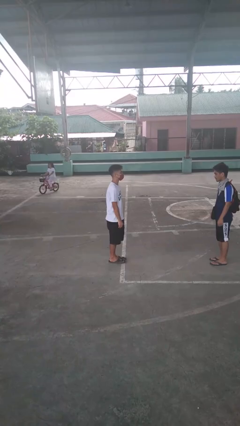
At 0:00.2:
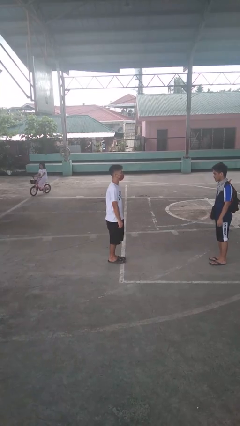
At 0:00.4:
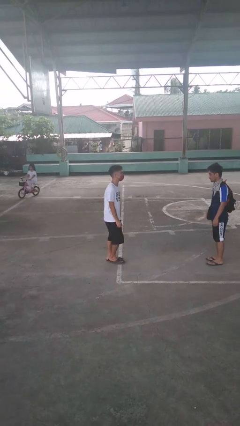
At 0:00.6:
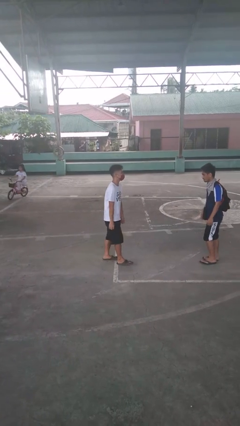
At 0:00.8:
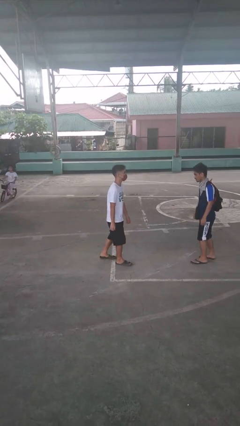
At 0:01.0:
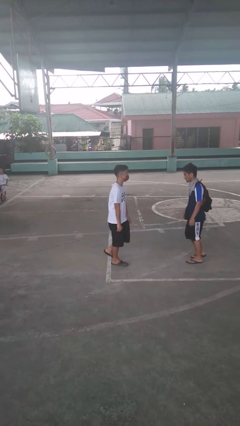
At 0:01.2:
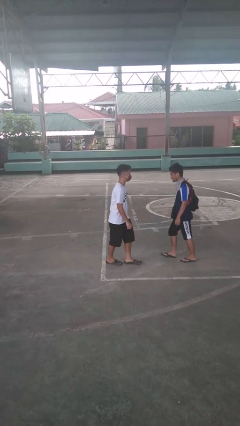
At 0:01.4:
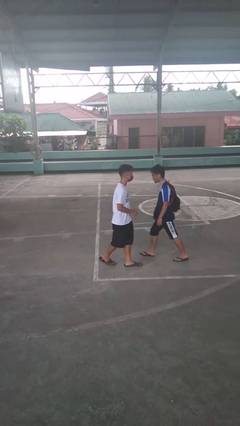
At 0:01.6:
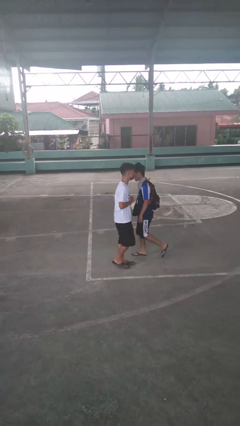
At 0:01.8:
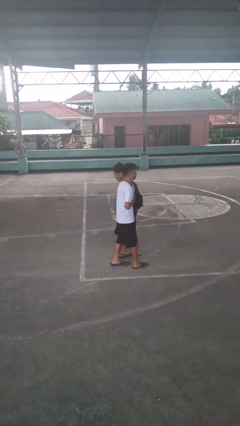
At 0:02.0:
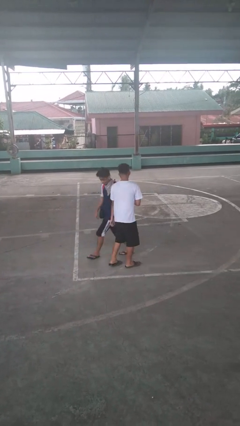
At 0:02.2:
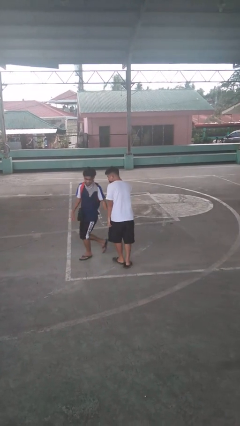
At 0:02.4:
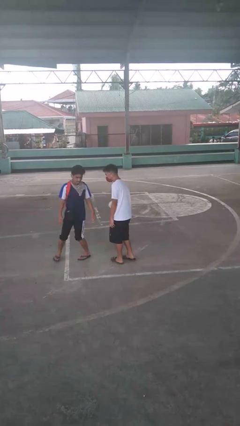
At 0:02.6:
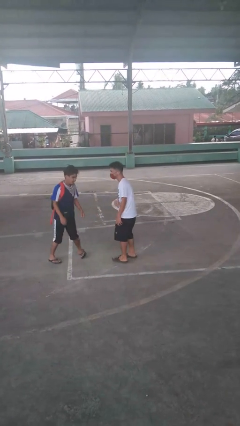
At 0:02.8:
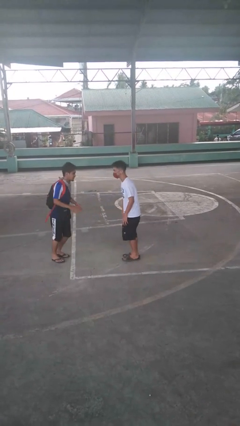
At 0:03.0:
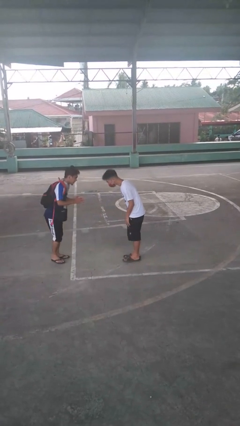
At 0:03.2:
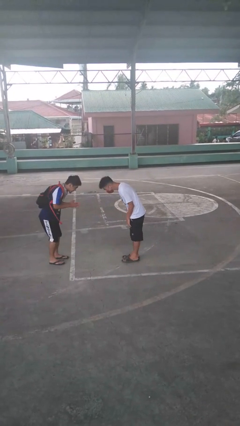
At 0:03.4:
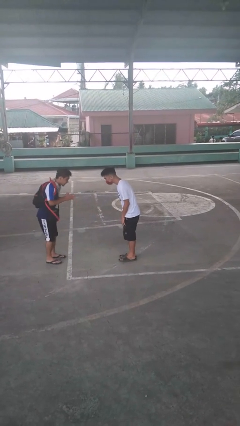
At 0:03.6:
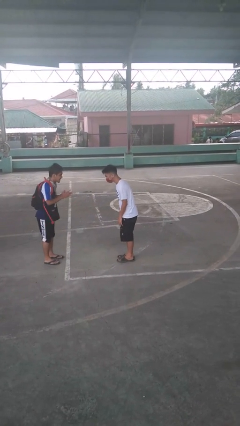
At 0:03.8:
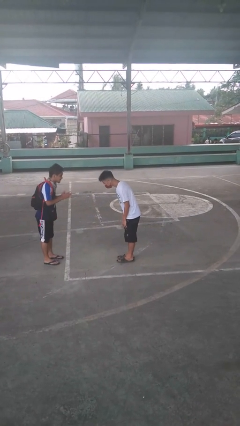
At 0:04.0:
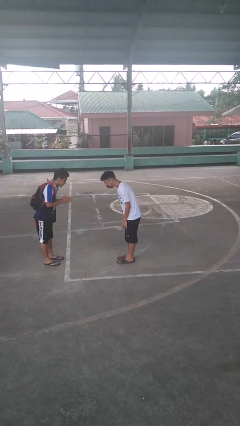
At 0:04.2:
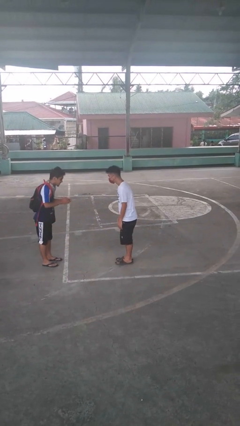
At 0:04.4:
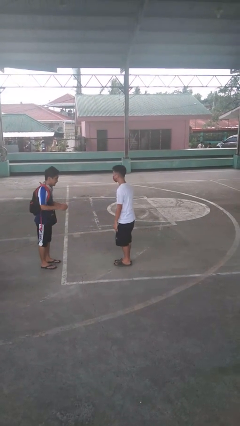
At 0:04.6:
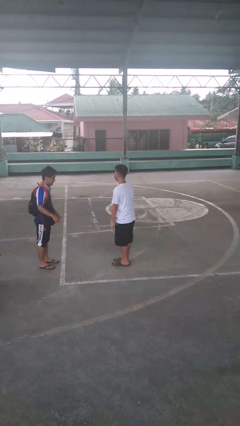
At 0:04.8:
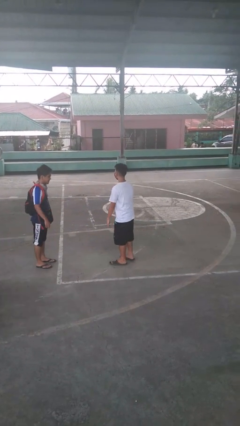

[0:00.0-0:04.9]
person bumps into person

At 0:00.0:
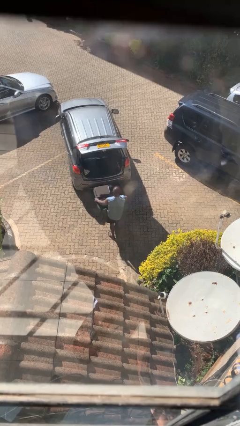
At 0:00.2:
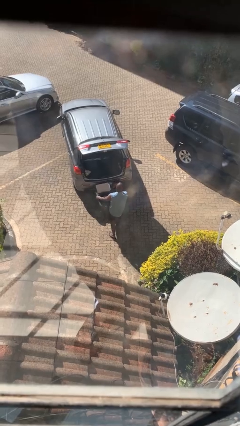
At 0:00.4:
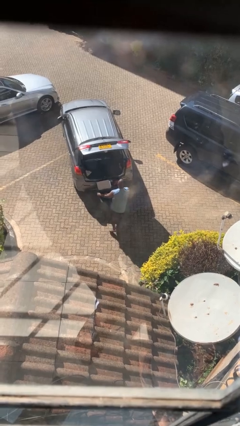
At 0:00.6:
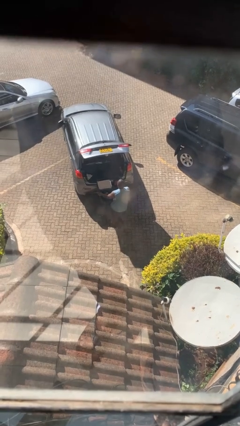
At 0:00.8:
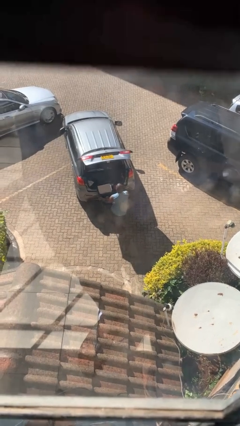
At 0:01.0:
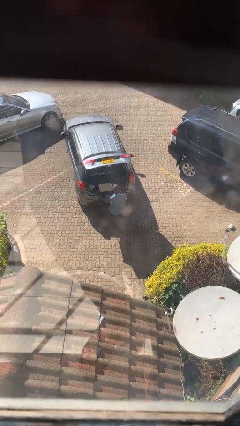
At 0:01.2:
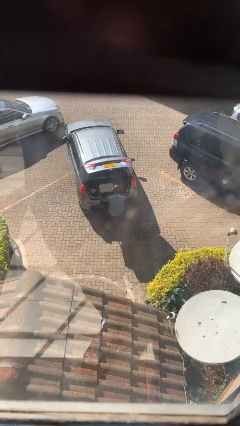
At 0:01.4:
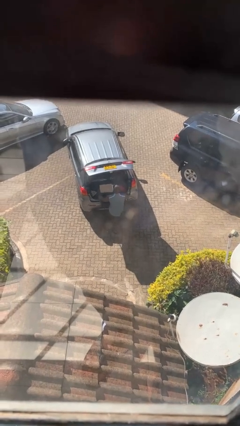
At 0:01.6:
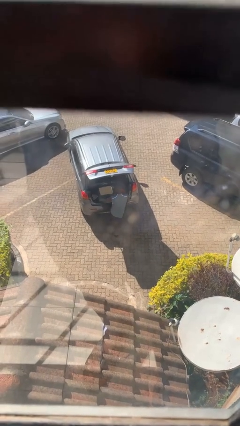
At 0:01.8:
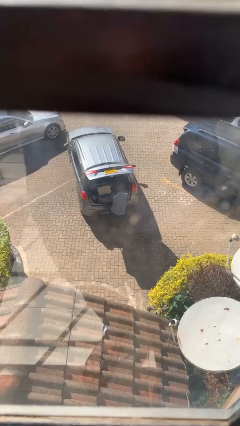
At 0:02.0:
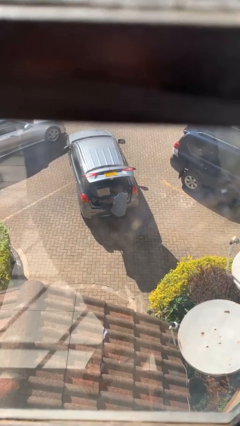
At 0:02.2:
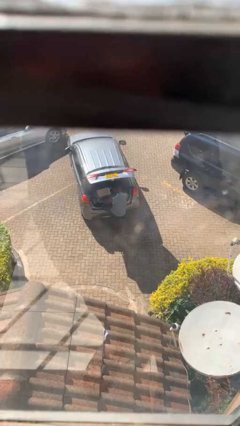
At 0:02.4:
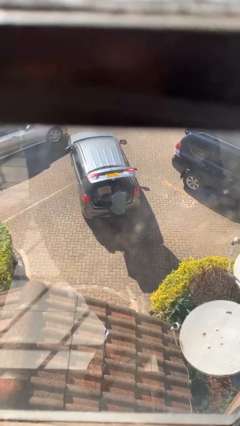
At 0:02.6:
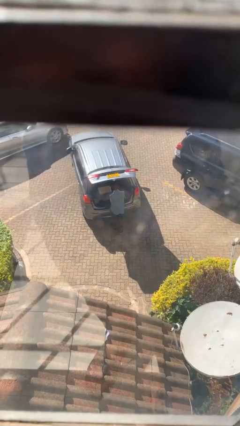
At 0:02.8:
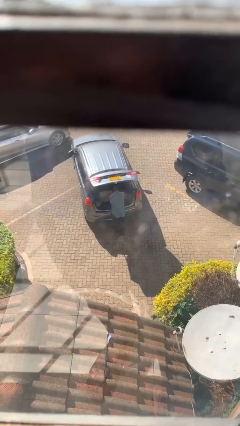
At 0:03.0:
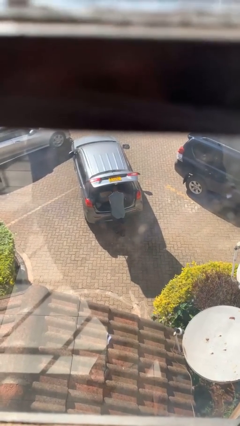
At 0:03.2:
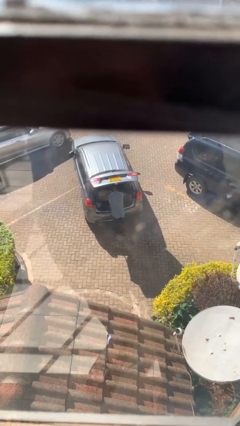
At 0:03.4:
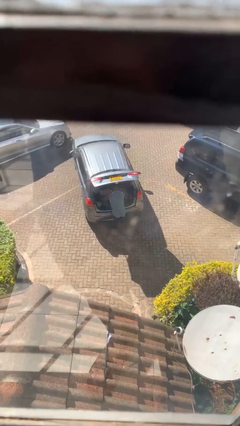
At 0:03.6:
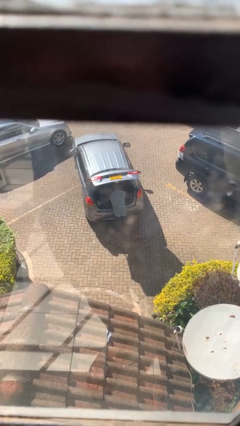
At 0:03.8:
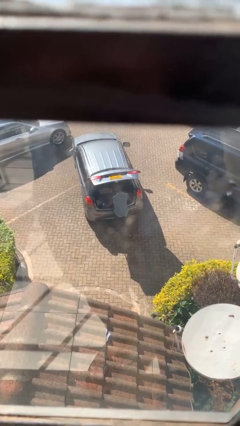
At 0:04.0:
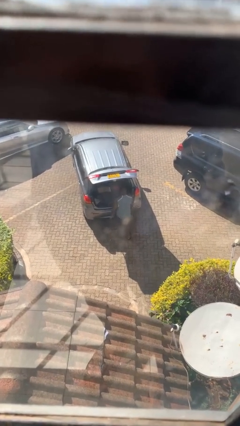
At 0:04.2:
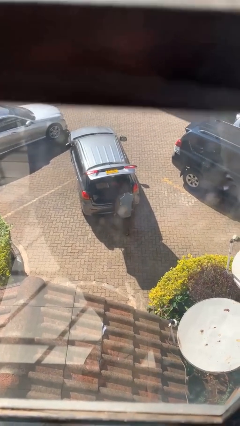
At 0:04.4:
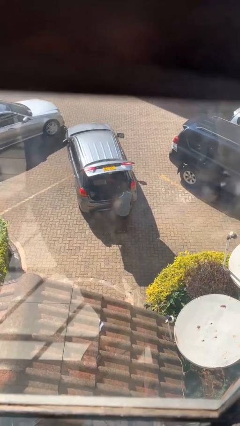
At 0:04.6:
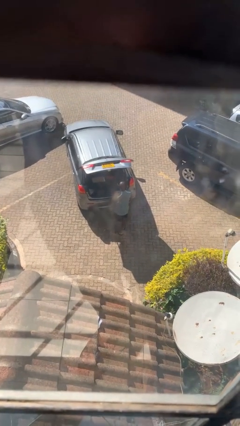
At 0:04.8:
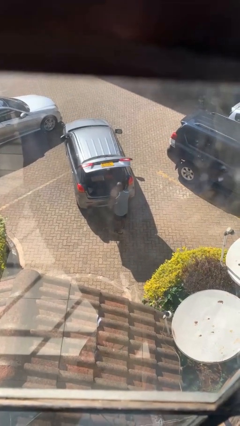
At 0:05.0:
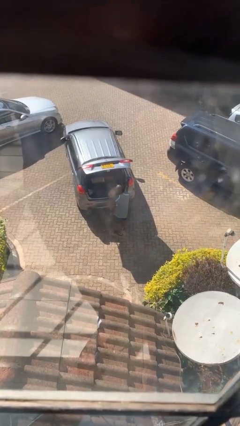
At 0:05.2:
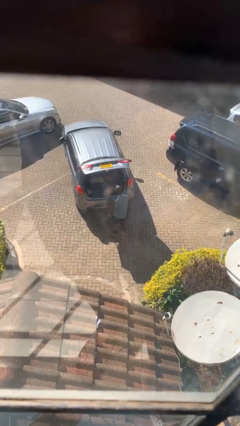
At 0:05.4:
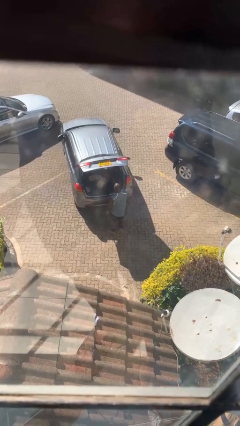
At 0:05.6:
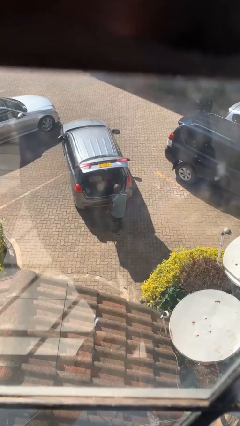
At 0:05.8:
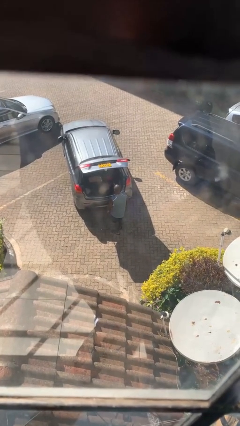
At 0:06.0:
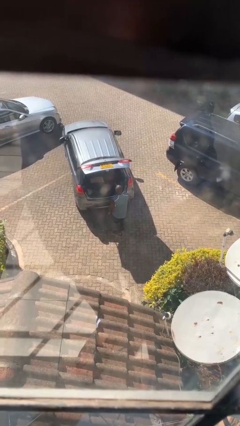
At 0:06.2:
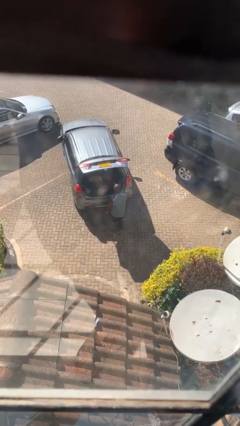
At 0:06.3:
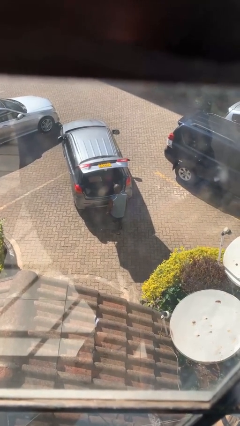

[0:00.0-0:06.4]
person loads car

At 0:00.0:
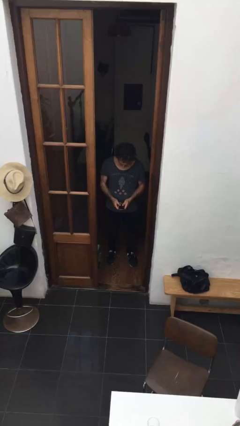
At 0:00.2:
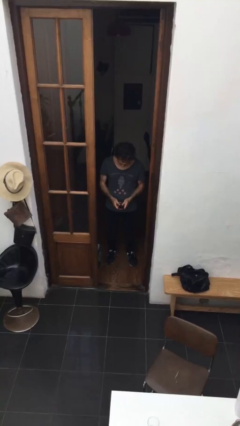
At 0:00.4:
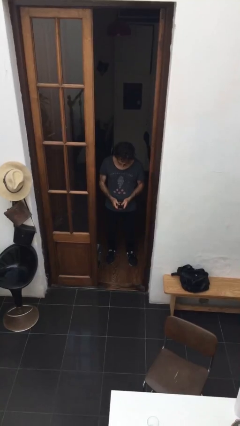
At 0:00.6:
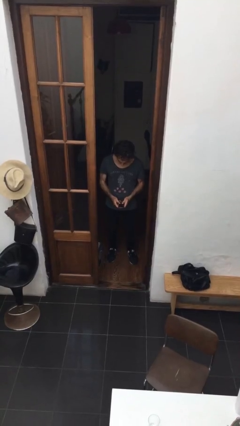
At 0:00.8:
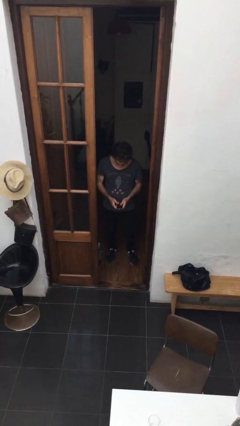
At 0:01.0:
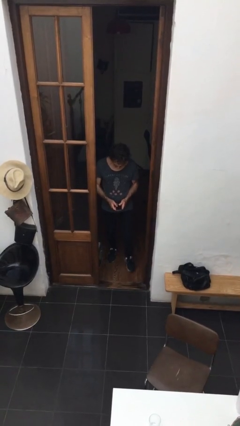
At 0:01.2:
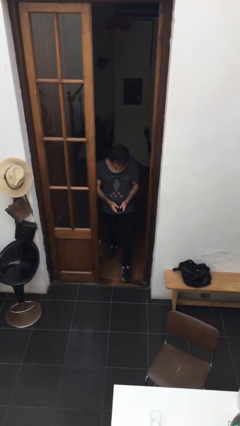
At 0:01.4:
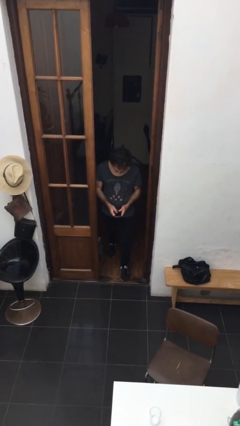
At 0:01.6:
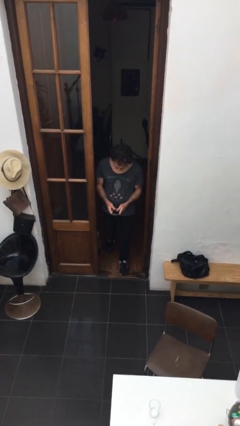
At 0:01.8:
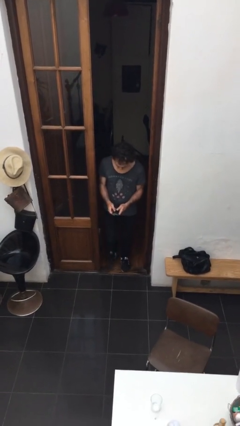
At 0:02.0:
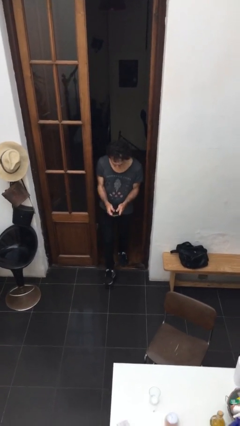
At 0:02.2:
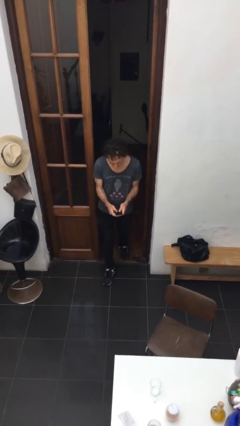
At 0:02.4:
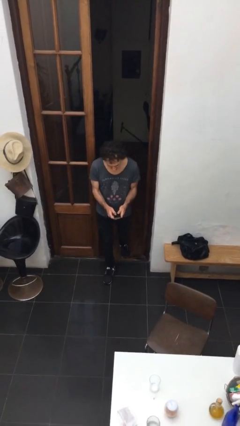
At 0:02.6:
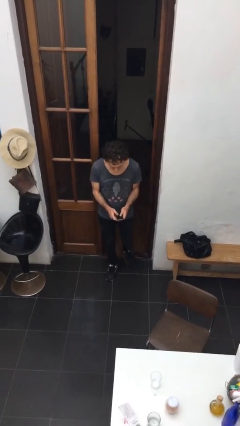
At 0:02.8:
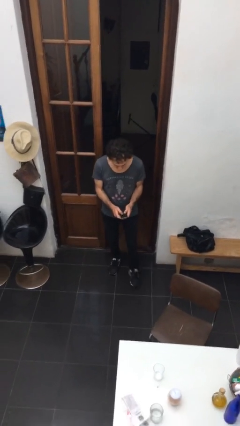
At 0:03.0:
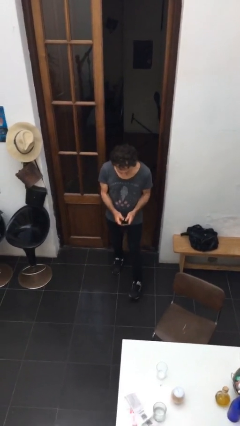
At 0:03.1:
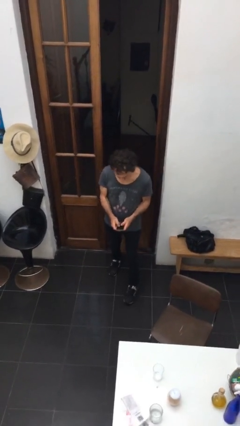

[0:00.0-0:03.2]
person enters scene through structure

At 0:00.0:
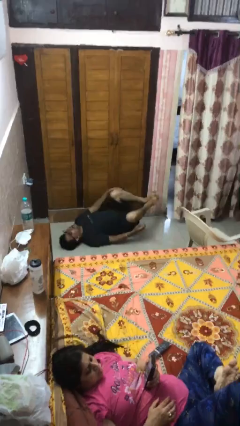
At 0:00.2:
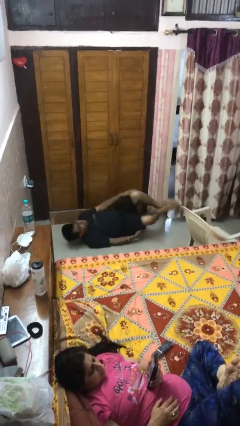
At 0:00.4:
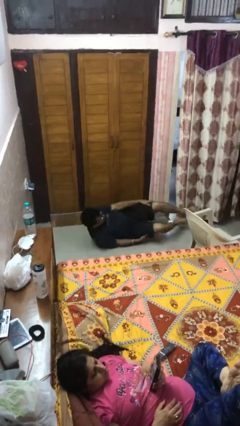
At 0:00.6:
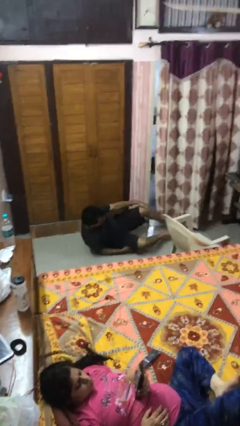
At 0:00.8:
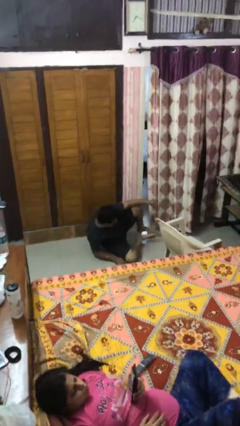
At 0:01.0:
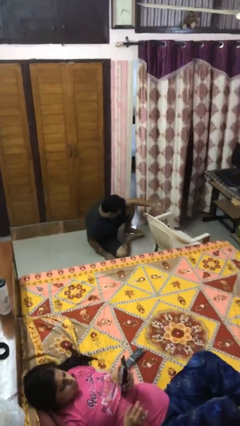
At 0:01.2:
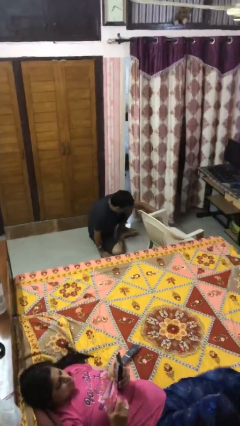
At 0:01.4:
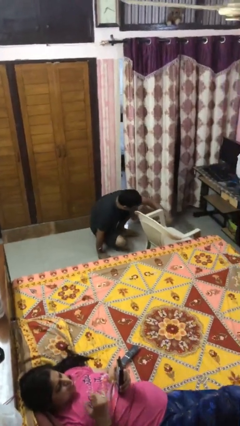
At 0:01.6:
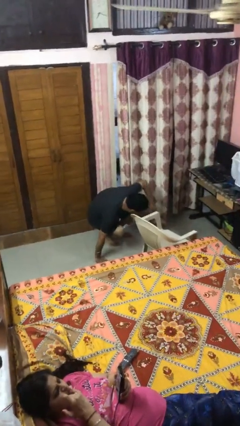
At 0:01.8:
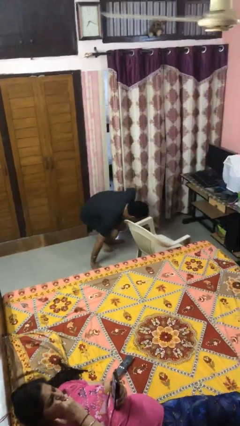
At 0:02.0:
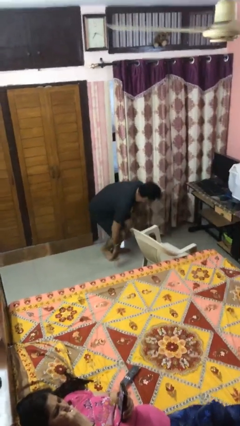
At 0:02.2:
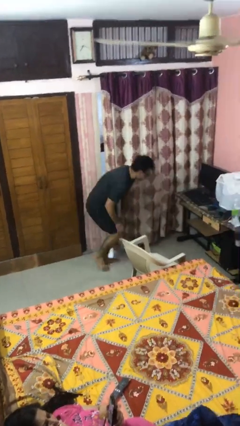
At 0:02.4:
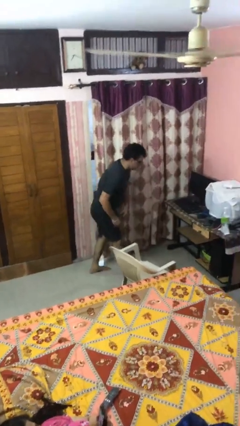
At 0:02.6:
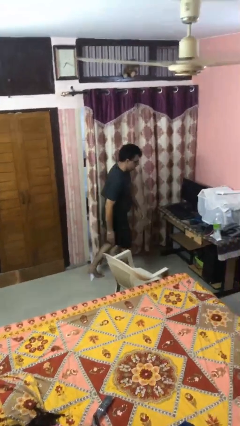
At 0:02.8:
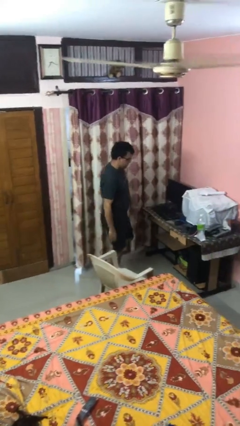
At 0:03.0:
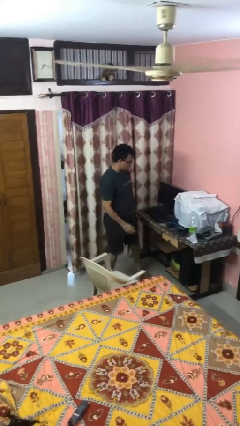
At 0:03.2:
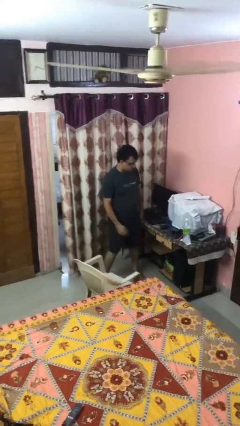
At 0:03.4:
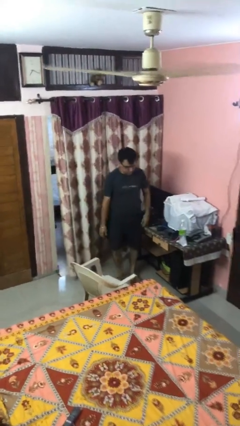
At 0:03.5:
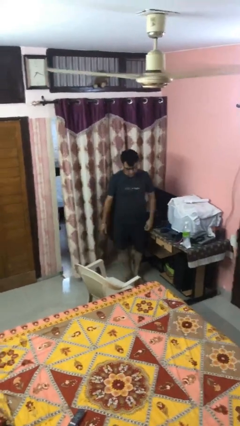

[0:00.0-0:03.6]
person stands up from floor
